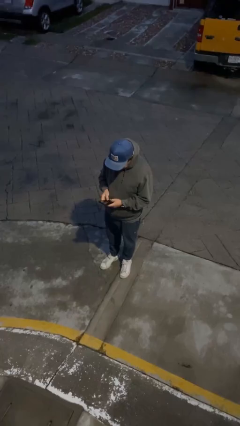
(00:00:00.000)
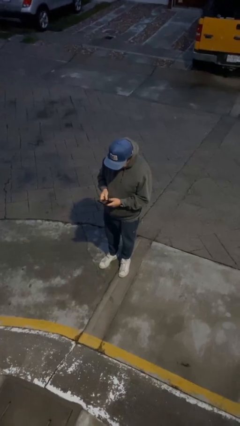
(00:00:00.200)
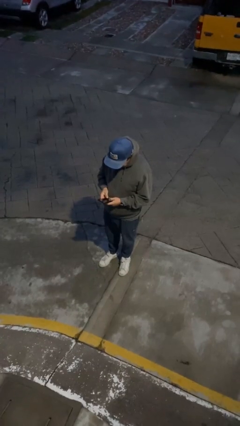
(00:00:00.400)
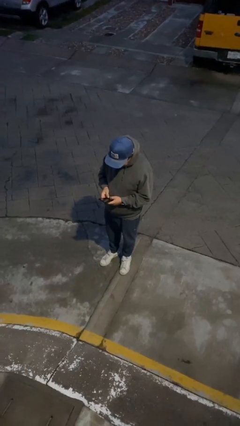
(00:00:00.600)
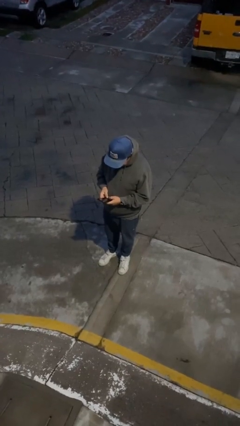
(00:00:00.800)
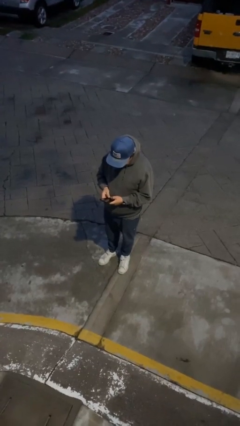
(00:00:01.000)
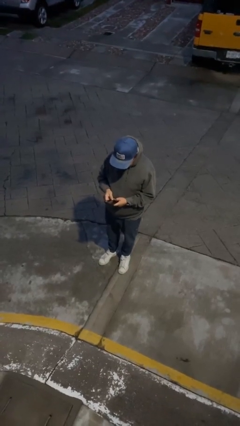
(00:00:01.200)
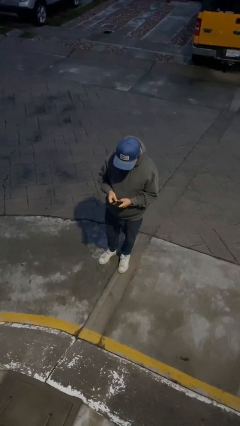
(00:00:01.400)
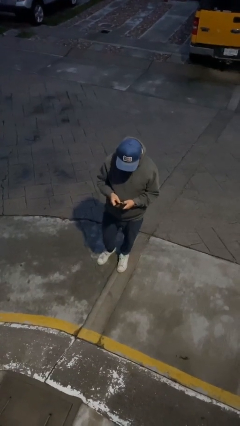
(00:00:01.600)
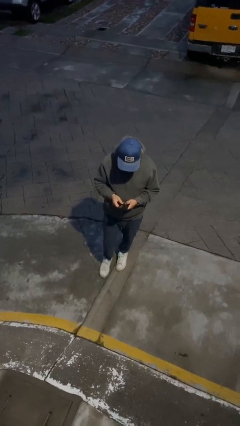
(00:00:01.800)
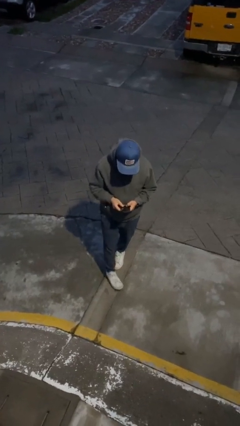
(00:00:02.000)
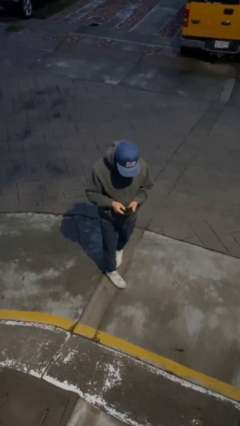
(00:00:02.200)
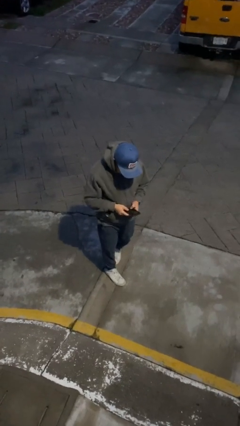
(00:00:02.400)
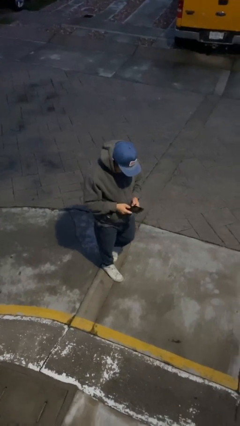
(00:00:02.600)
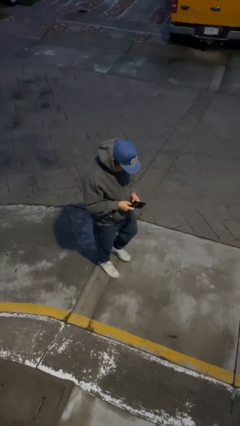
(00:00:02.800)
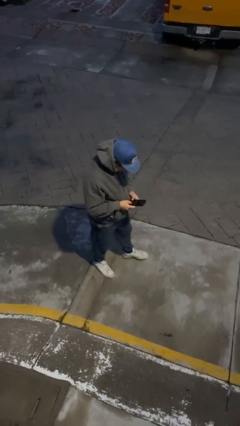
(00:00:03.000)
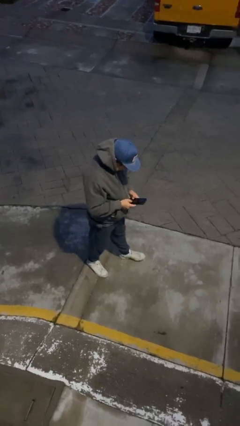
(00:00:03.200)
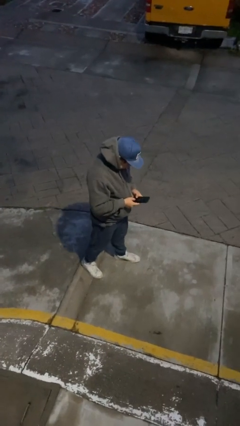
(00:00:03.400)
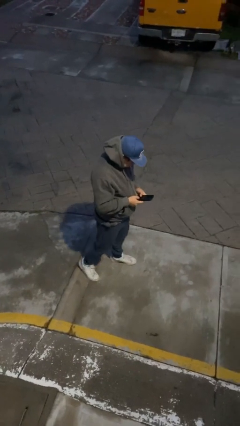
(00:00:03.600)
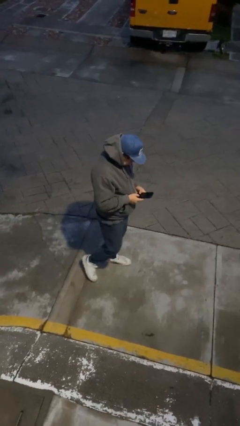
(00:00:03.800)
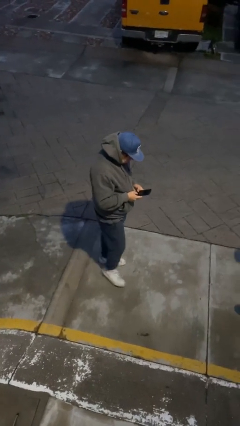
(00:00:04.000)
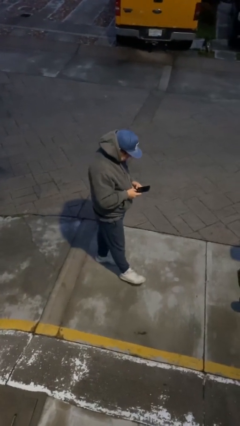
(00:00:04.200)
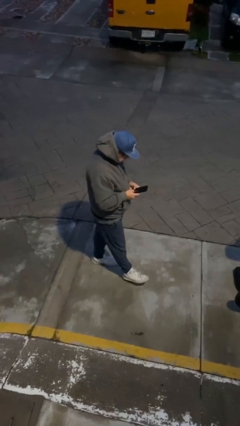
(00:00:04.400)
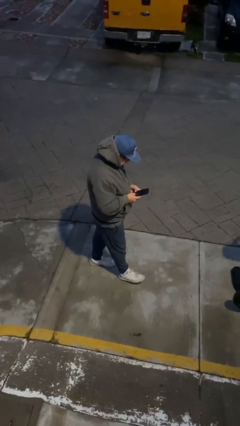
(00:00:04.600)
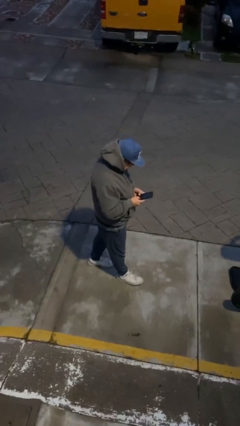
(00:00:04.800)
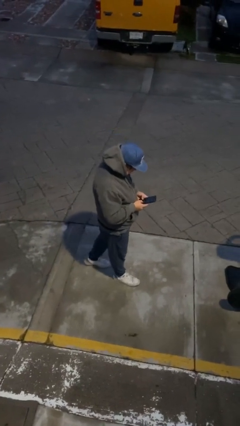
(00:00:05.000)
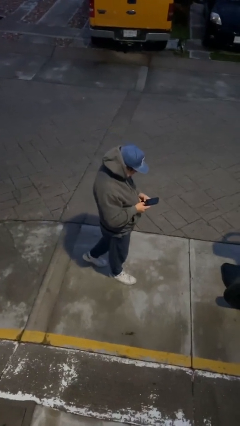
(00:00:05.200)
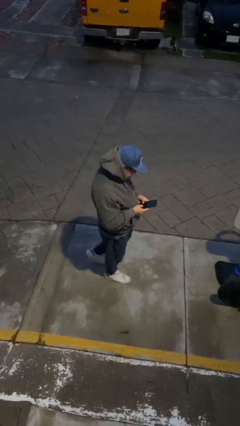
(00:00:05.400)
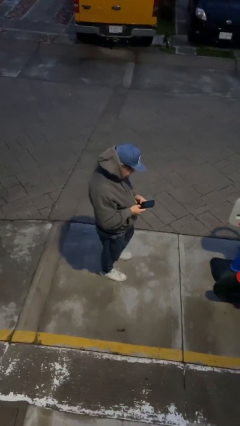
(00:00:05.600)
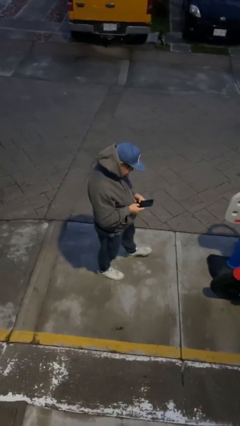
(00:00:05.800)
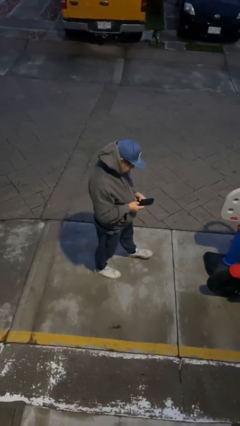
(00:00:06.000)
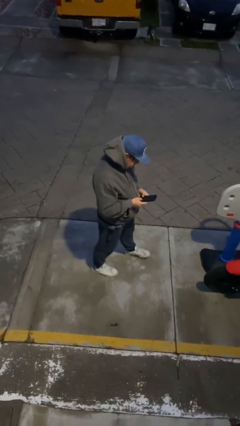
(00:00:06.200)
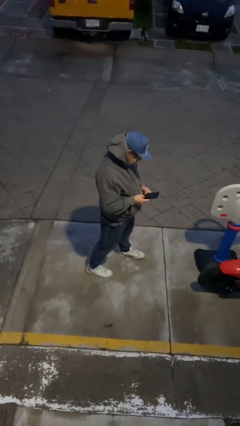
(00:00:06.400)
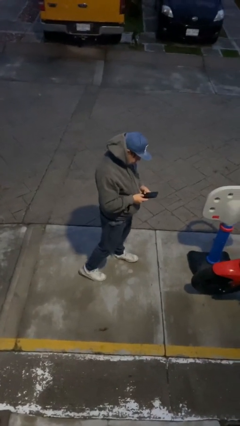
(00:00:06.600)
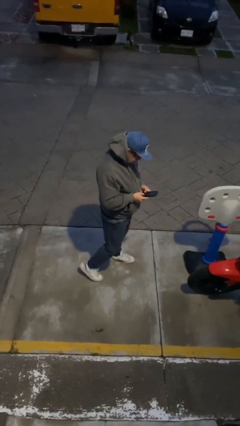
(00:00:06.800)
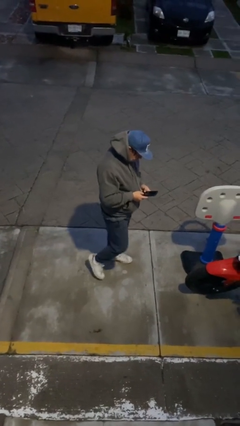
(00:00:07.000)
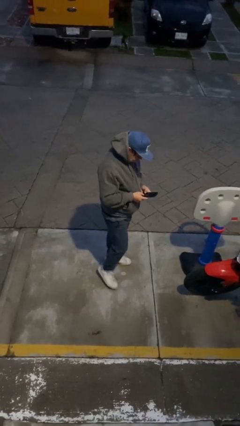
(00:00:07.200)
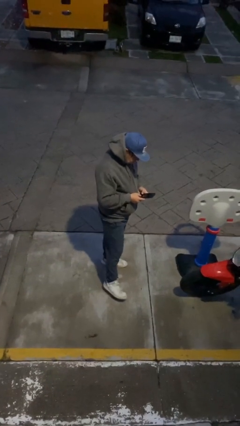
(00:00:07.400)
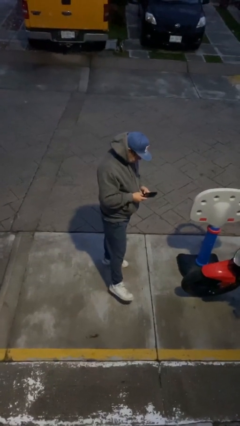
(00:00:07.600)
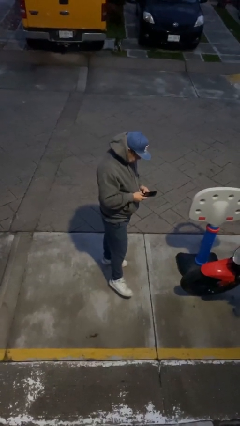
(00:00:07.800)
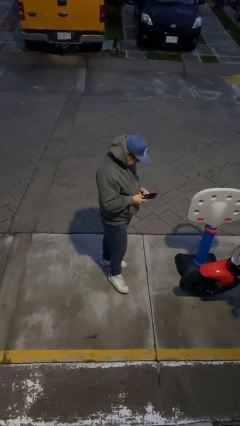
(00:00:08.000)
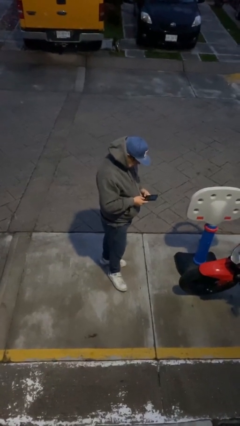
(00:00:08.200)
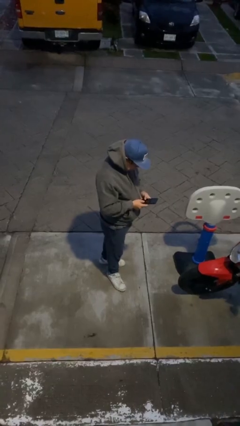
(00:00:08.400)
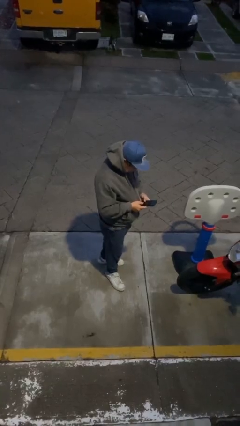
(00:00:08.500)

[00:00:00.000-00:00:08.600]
person texts on phone

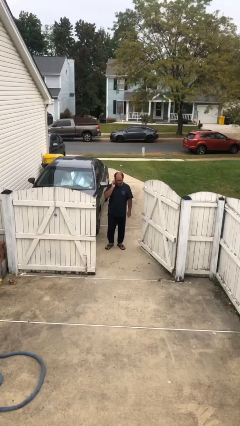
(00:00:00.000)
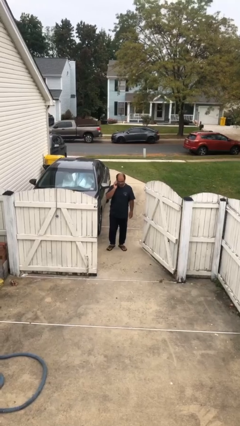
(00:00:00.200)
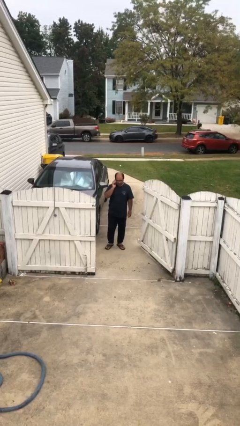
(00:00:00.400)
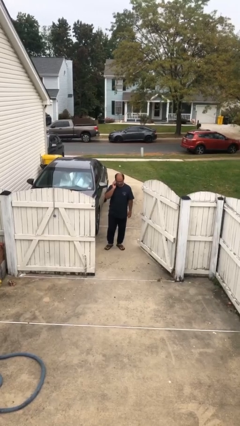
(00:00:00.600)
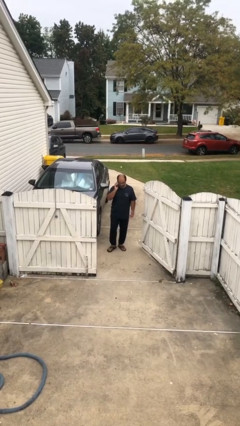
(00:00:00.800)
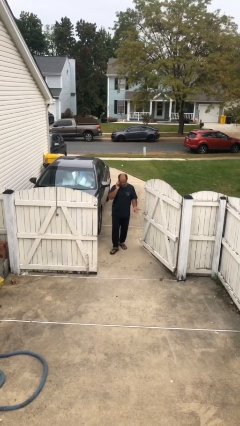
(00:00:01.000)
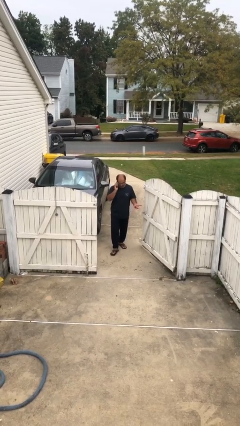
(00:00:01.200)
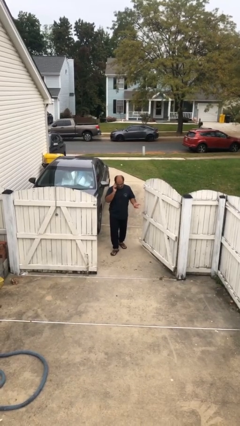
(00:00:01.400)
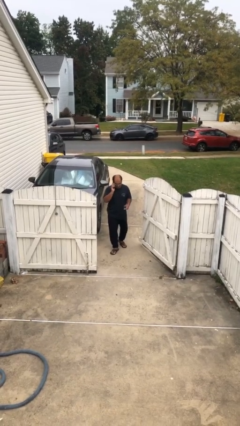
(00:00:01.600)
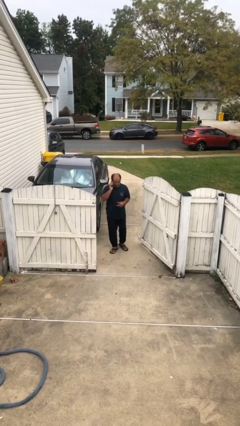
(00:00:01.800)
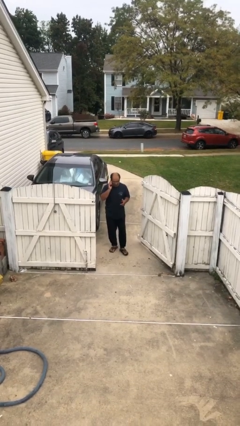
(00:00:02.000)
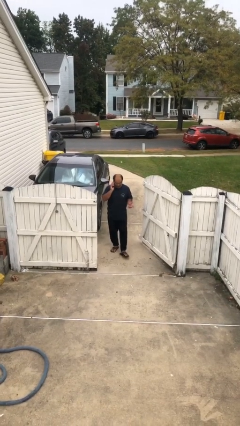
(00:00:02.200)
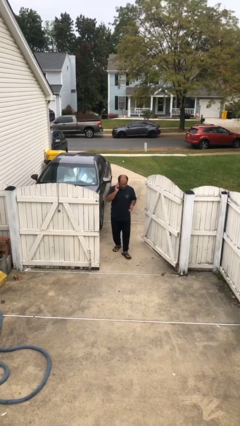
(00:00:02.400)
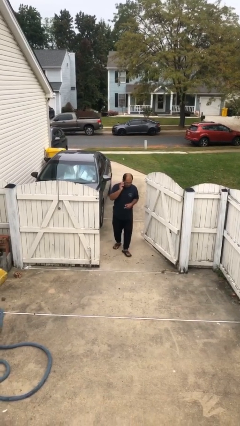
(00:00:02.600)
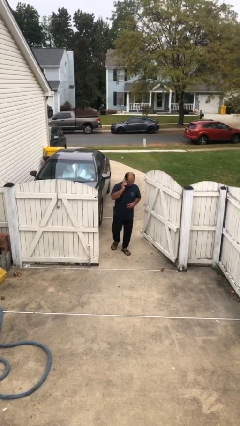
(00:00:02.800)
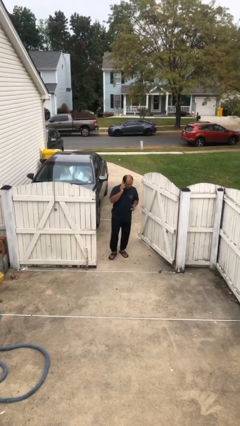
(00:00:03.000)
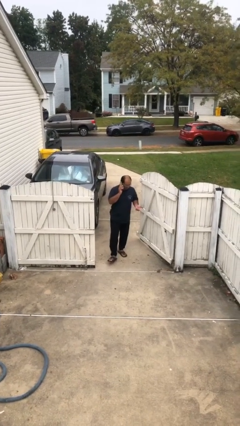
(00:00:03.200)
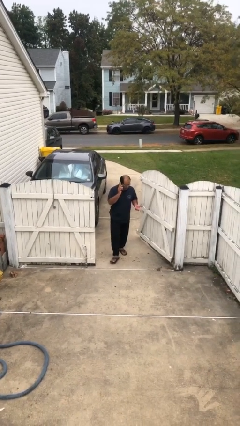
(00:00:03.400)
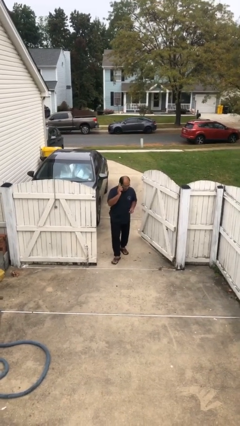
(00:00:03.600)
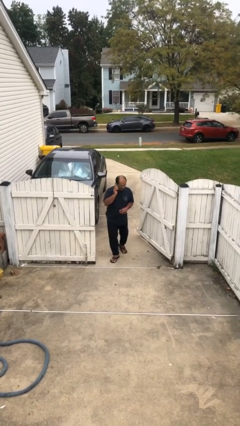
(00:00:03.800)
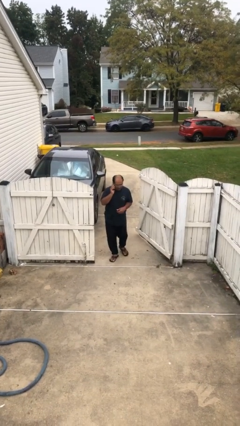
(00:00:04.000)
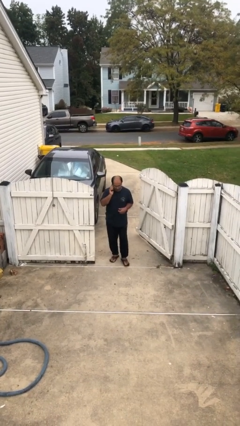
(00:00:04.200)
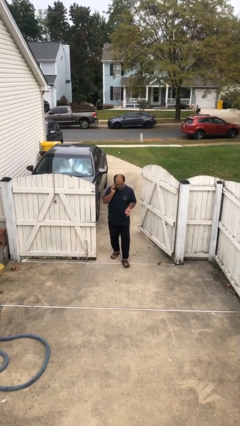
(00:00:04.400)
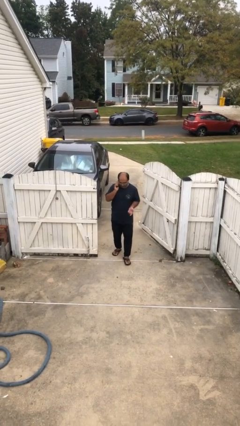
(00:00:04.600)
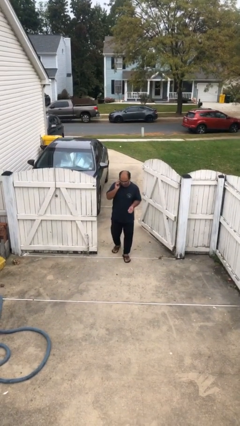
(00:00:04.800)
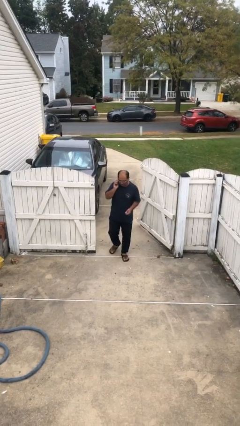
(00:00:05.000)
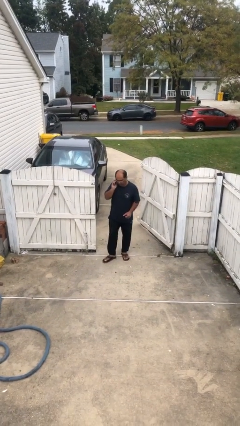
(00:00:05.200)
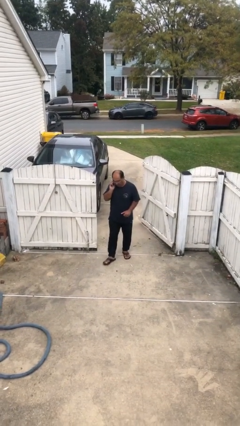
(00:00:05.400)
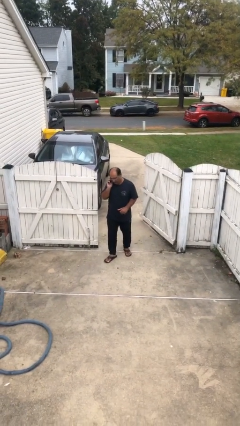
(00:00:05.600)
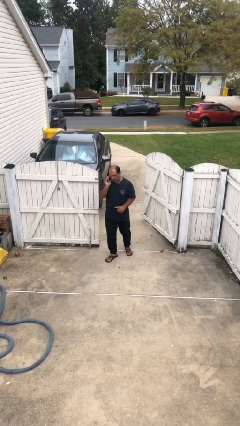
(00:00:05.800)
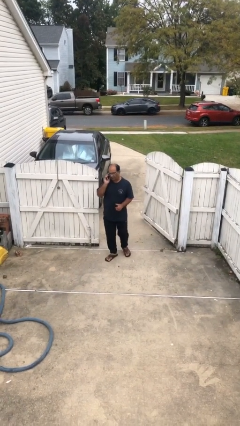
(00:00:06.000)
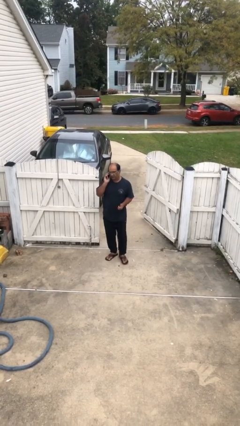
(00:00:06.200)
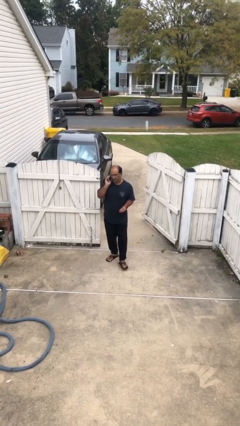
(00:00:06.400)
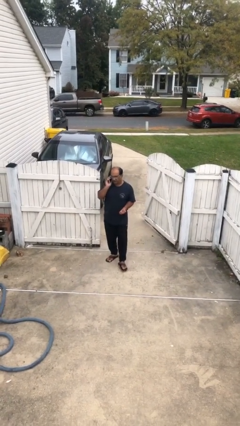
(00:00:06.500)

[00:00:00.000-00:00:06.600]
person enters scene through structure

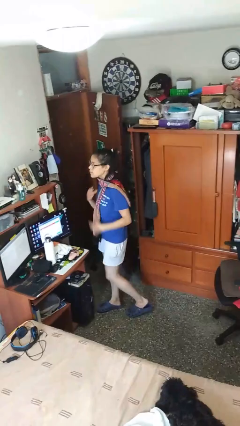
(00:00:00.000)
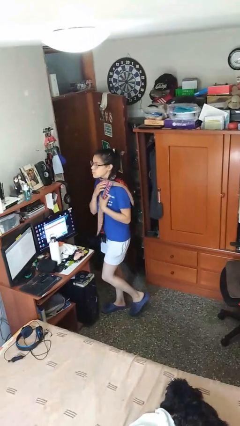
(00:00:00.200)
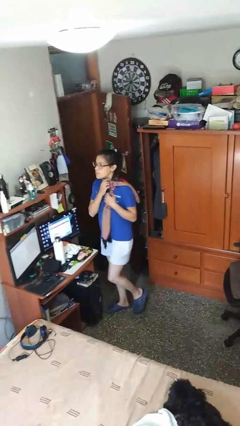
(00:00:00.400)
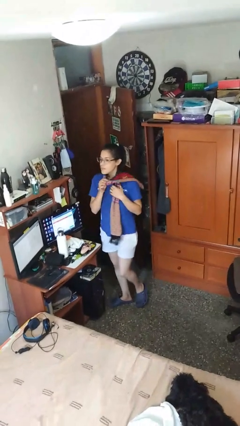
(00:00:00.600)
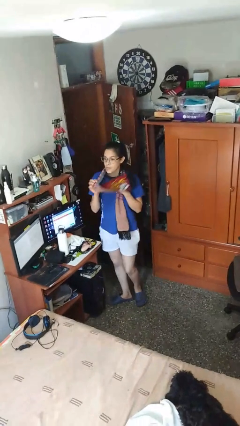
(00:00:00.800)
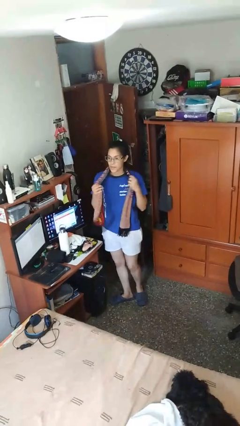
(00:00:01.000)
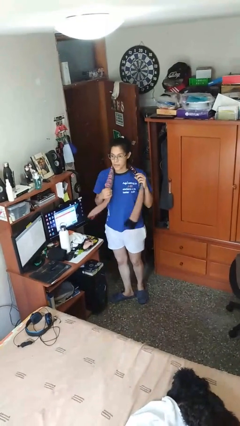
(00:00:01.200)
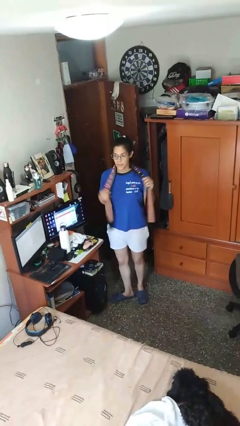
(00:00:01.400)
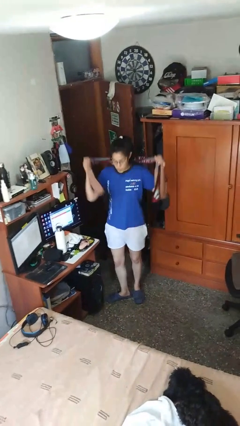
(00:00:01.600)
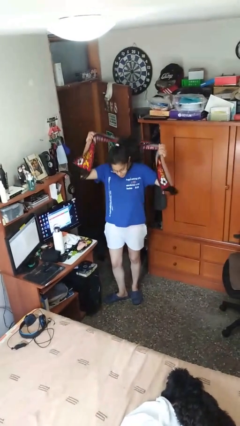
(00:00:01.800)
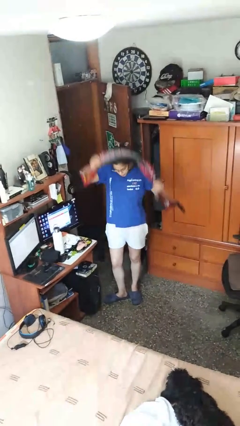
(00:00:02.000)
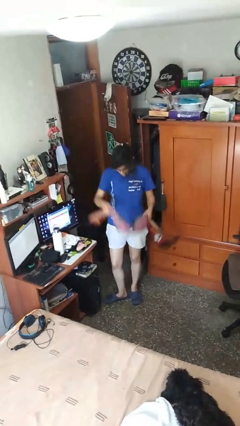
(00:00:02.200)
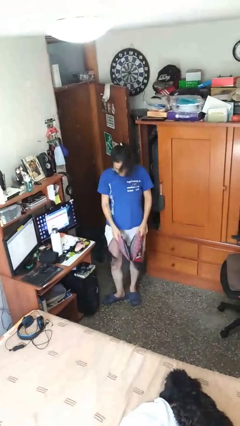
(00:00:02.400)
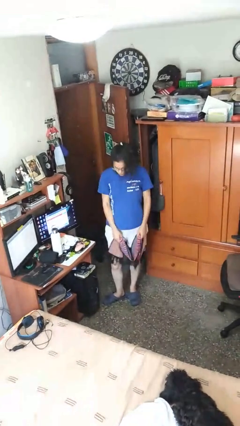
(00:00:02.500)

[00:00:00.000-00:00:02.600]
person takes off scarf
